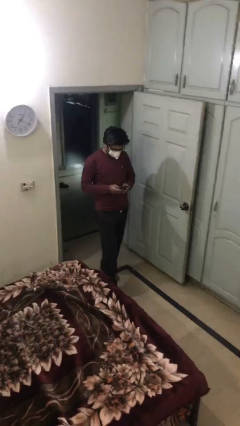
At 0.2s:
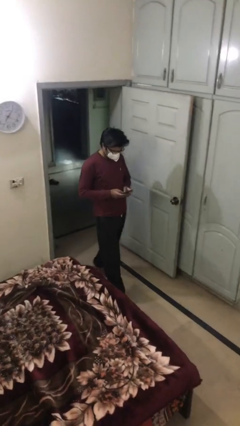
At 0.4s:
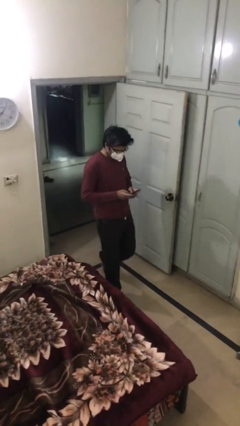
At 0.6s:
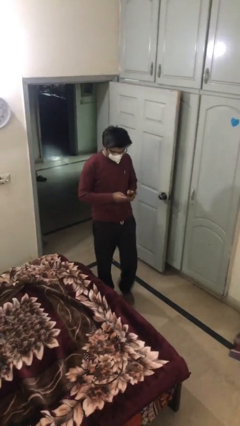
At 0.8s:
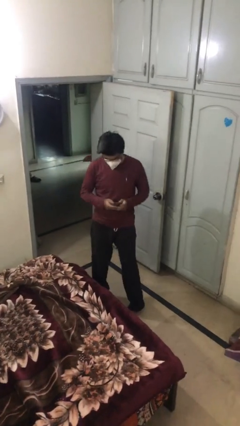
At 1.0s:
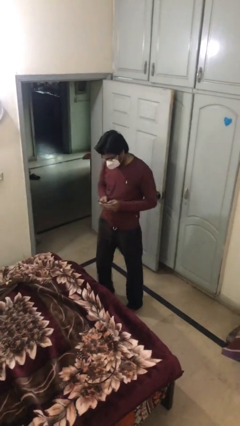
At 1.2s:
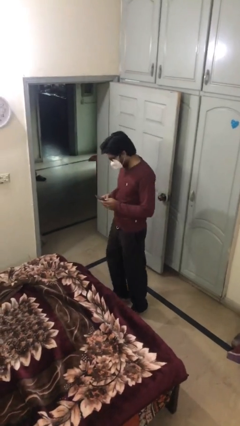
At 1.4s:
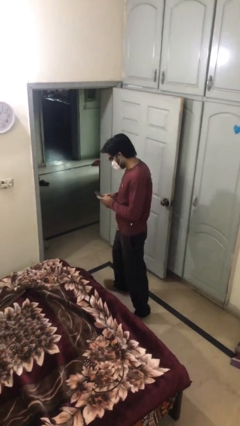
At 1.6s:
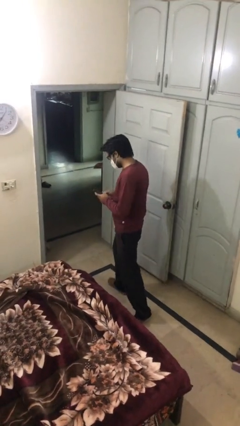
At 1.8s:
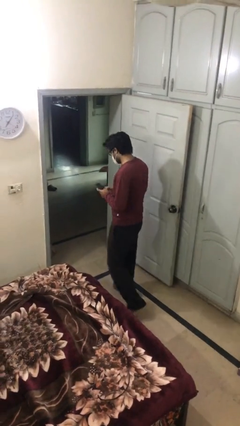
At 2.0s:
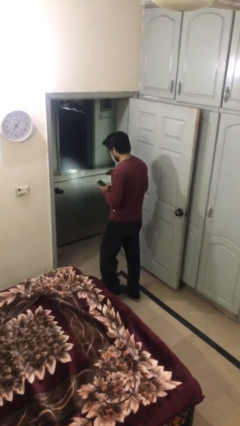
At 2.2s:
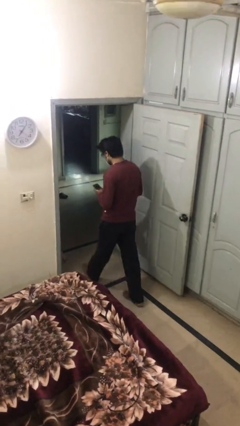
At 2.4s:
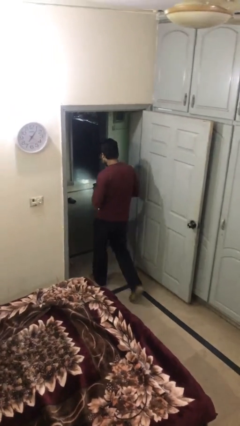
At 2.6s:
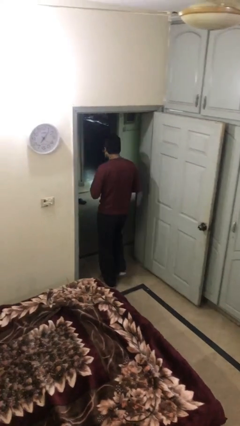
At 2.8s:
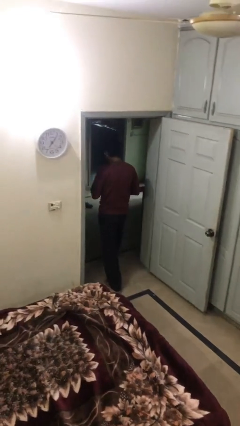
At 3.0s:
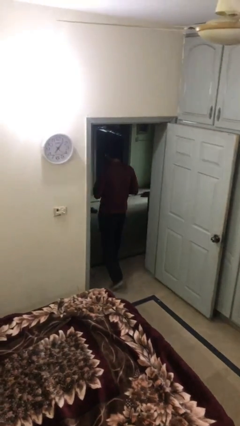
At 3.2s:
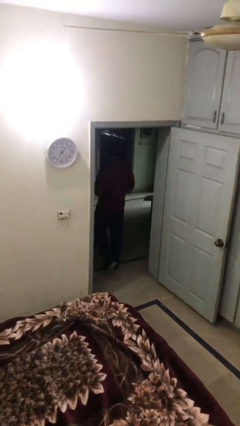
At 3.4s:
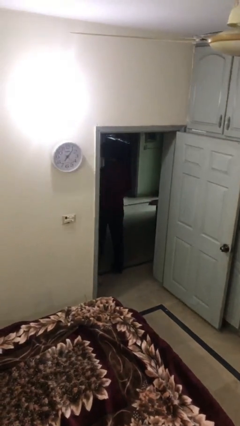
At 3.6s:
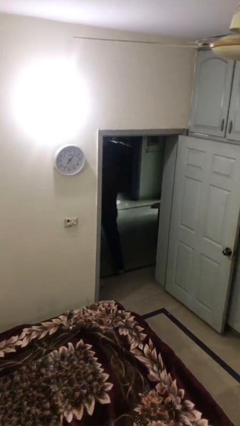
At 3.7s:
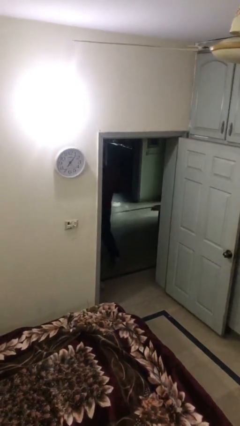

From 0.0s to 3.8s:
person exits scene through structure

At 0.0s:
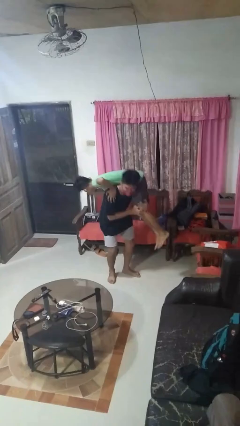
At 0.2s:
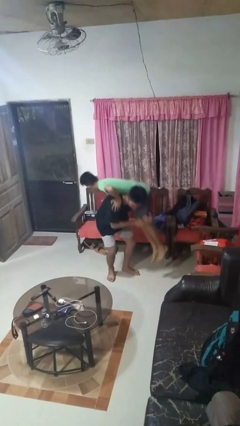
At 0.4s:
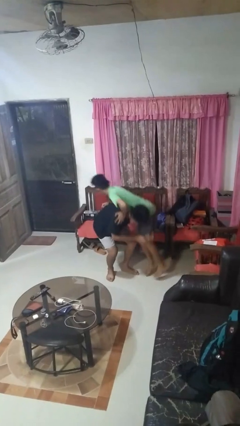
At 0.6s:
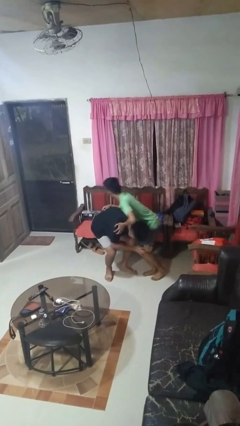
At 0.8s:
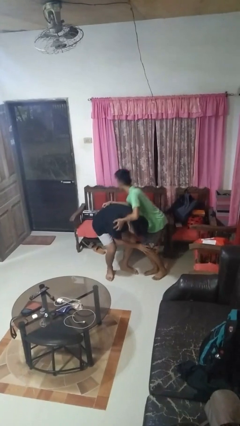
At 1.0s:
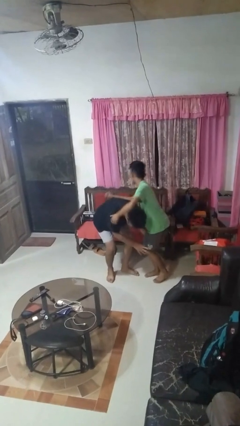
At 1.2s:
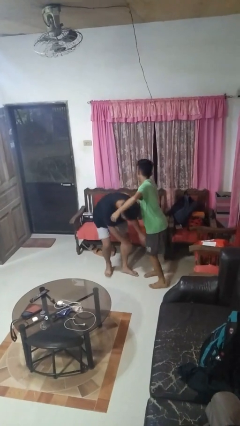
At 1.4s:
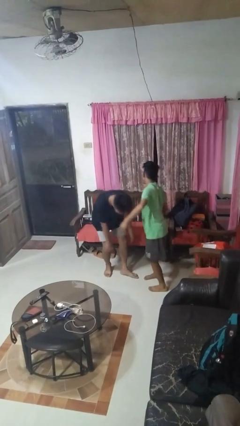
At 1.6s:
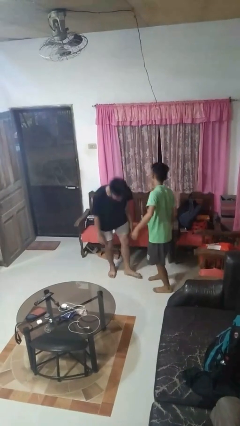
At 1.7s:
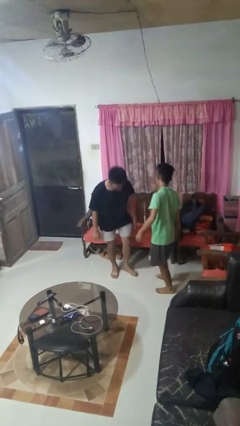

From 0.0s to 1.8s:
person puts down person

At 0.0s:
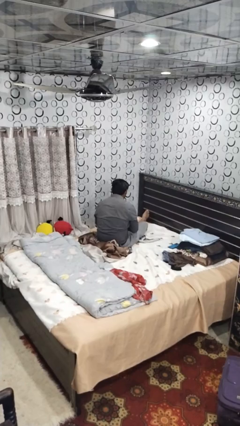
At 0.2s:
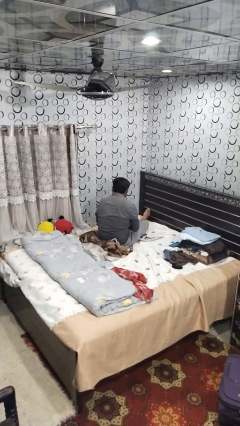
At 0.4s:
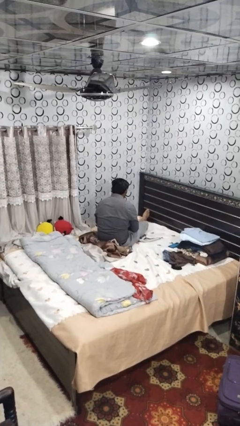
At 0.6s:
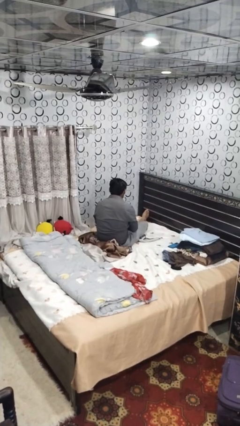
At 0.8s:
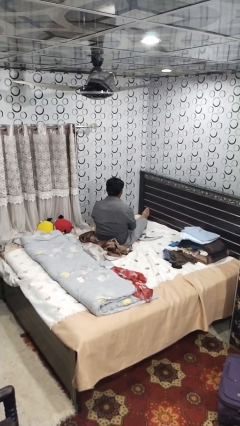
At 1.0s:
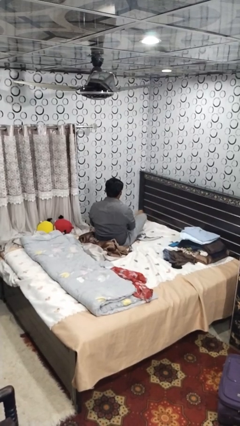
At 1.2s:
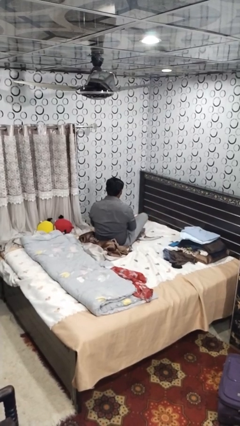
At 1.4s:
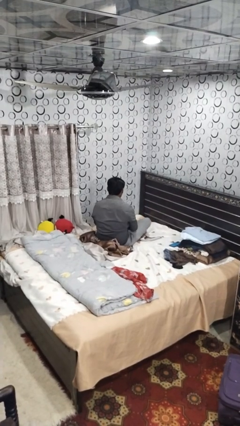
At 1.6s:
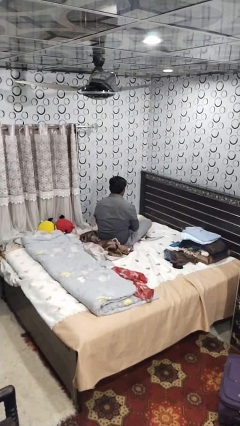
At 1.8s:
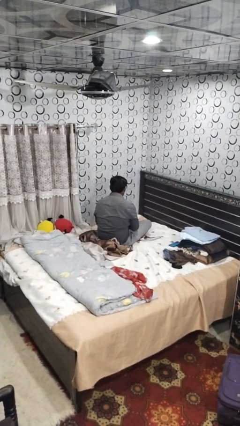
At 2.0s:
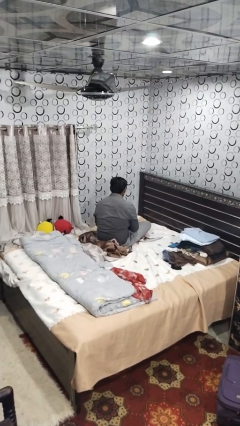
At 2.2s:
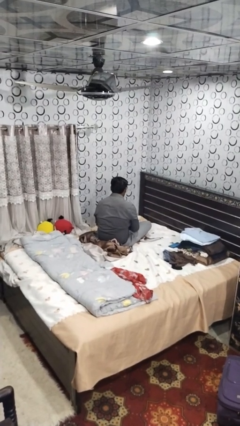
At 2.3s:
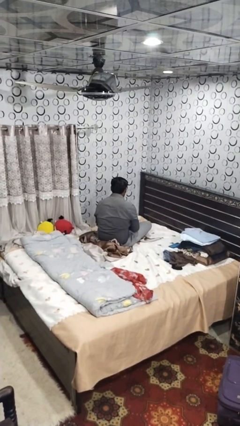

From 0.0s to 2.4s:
person crosses legs

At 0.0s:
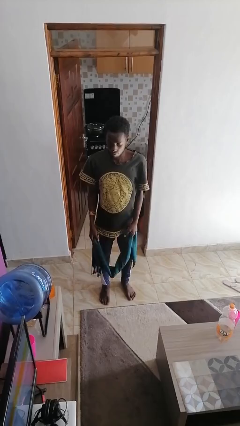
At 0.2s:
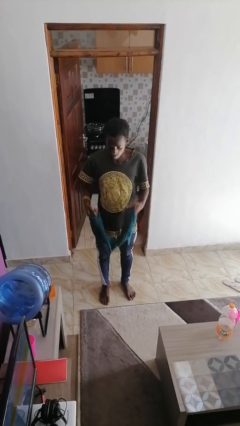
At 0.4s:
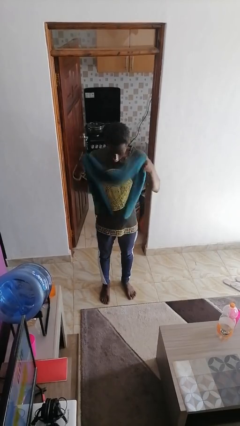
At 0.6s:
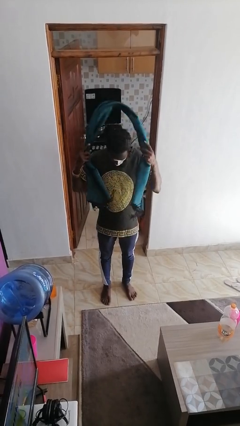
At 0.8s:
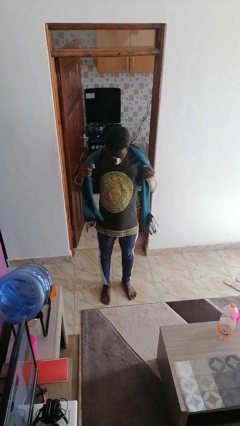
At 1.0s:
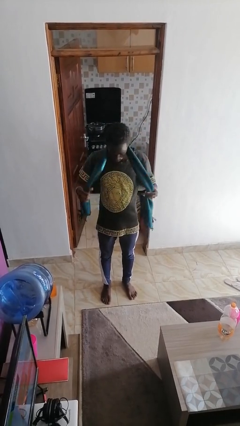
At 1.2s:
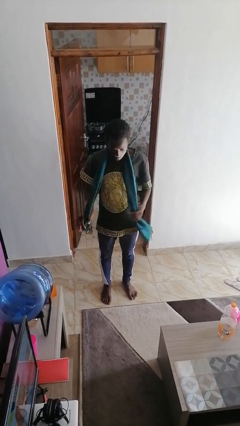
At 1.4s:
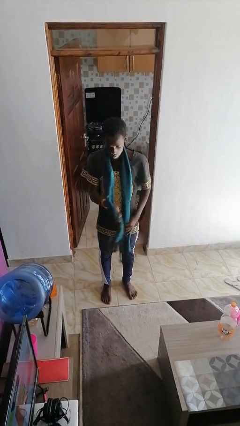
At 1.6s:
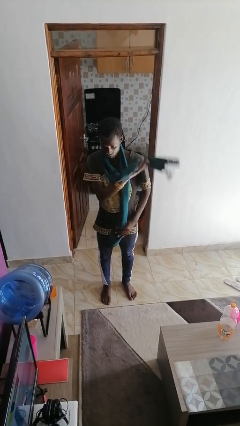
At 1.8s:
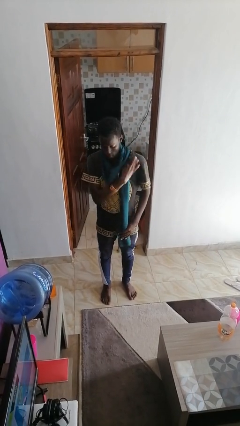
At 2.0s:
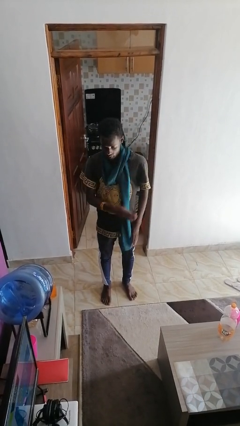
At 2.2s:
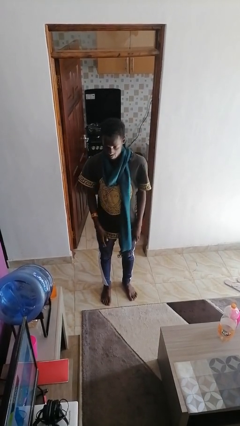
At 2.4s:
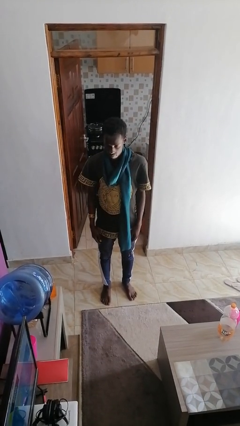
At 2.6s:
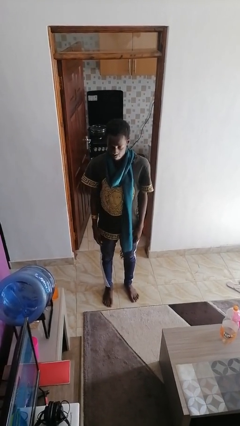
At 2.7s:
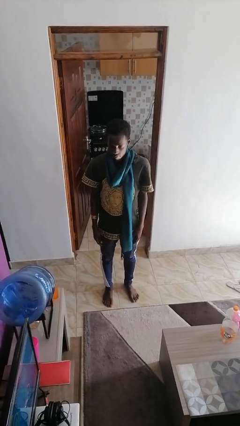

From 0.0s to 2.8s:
person puts on scarf

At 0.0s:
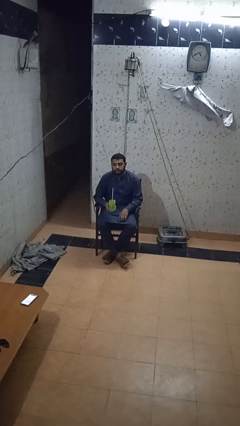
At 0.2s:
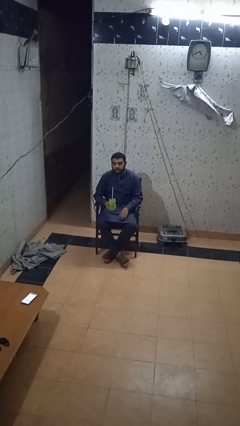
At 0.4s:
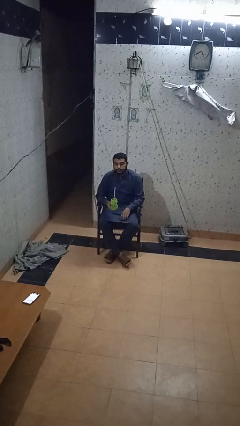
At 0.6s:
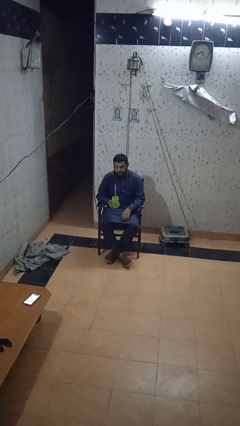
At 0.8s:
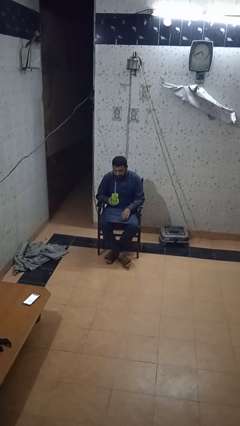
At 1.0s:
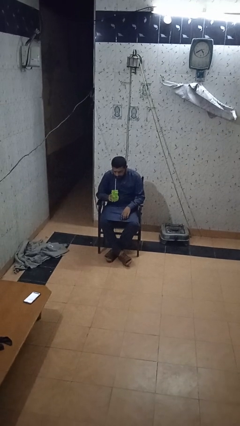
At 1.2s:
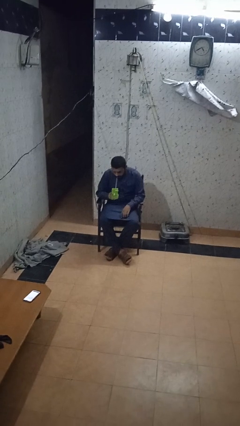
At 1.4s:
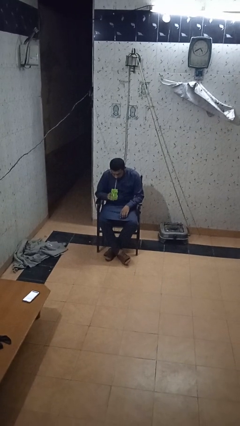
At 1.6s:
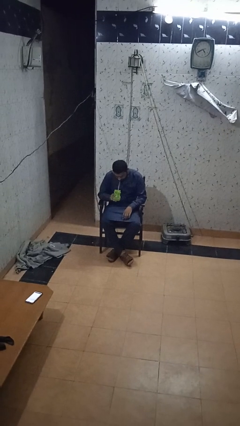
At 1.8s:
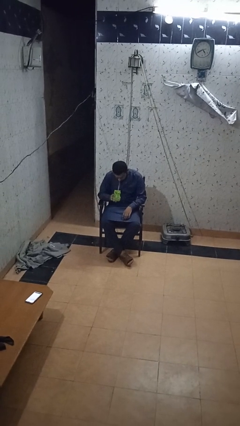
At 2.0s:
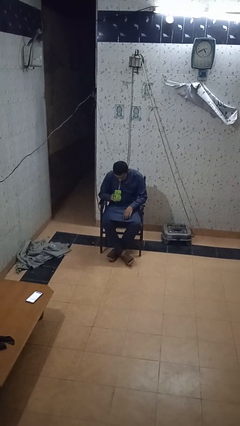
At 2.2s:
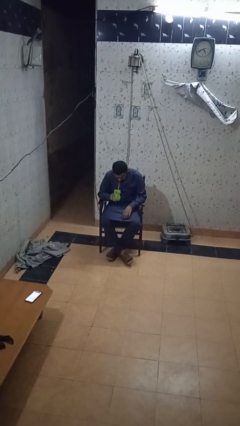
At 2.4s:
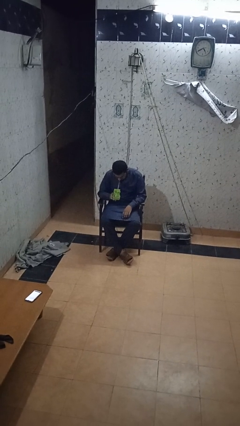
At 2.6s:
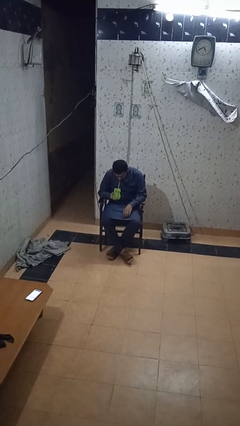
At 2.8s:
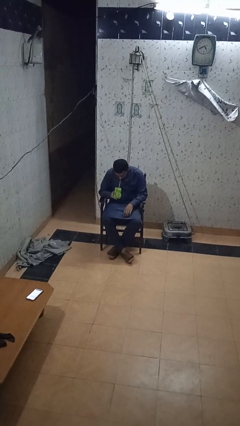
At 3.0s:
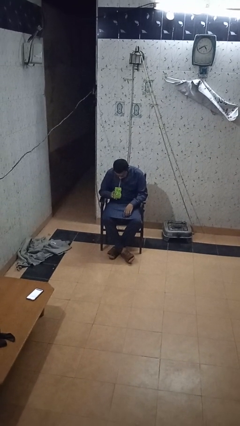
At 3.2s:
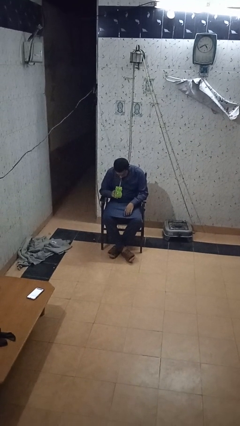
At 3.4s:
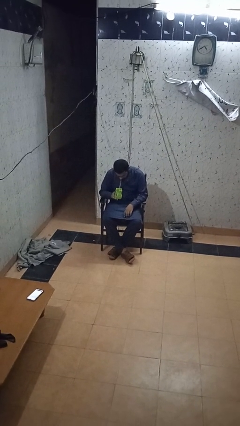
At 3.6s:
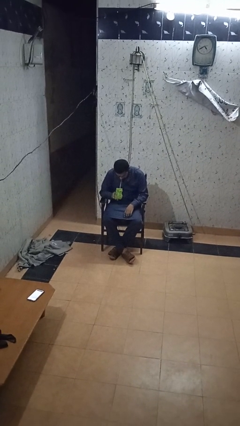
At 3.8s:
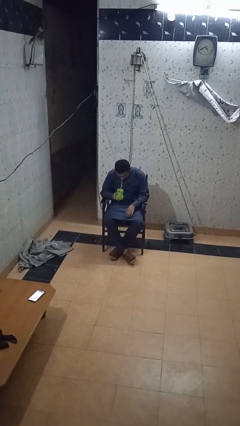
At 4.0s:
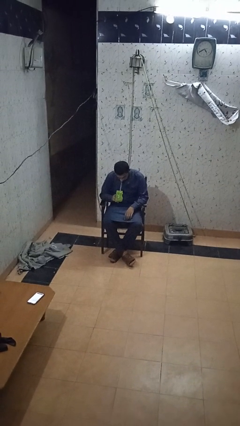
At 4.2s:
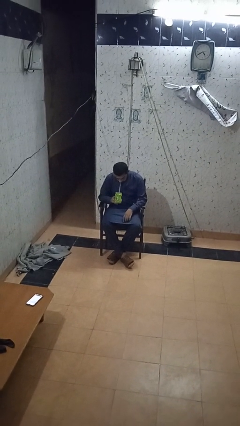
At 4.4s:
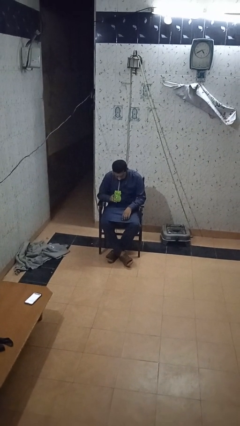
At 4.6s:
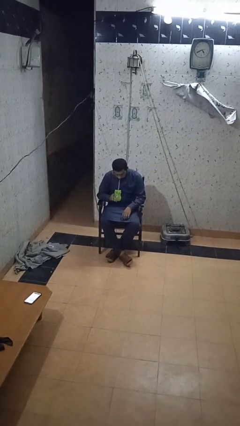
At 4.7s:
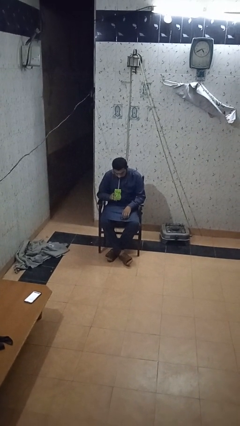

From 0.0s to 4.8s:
person drinks from straw

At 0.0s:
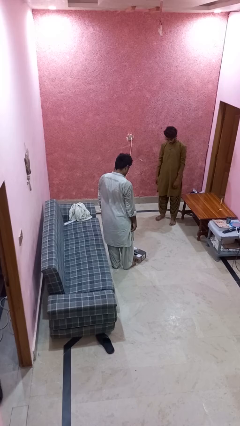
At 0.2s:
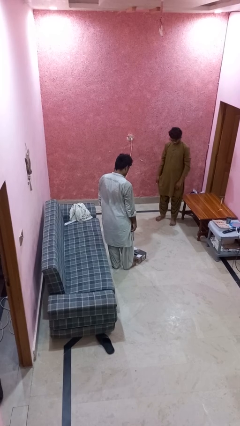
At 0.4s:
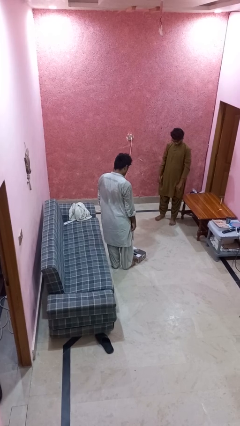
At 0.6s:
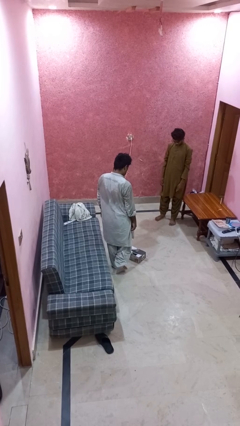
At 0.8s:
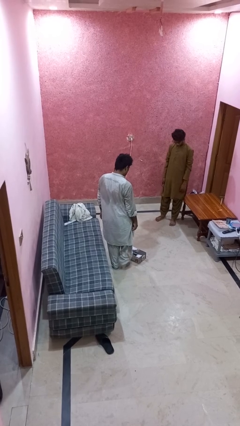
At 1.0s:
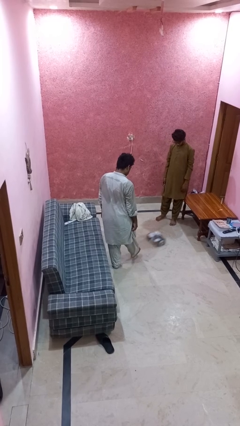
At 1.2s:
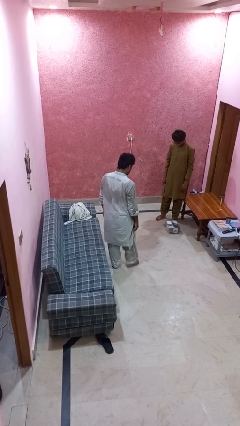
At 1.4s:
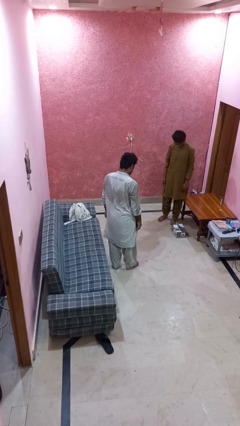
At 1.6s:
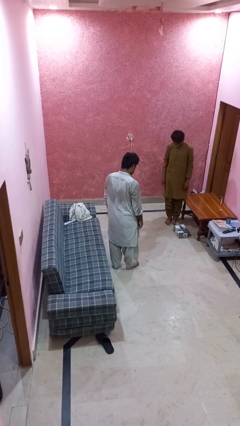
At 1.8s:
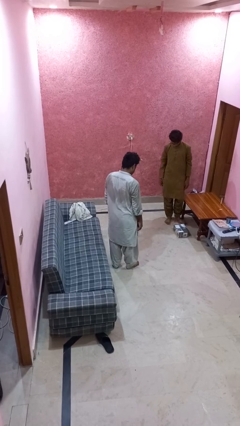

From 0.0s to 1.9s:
person kicks object to person
